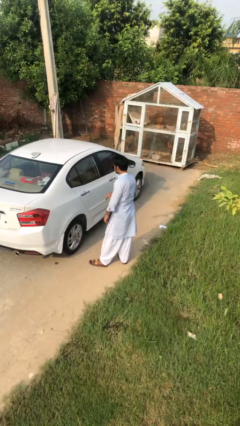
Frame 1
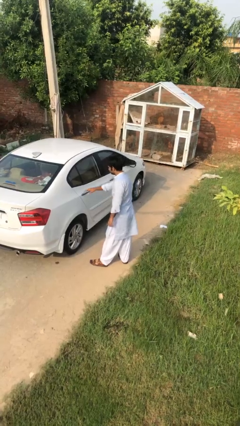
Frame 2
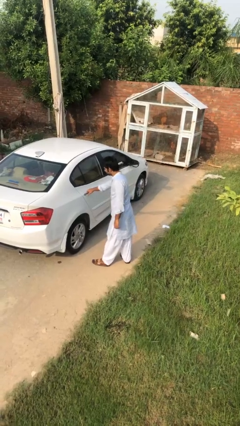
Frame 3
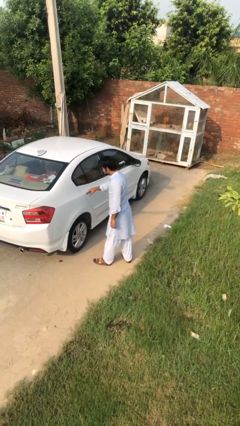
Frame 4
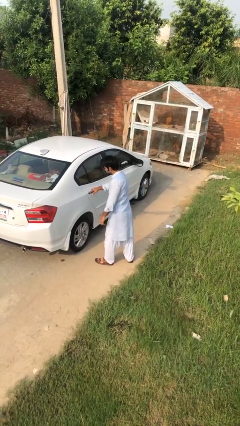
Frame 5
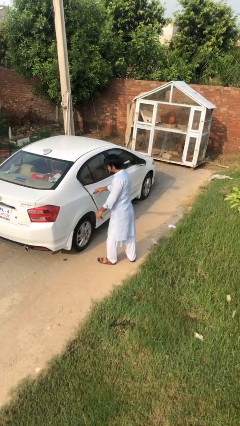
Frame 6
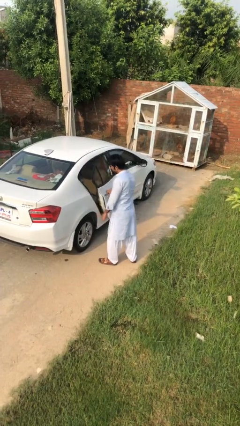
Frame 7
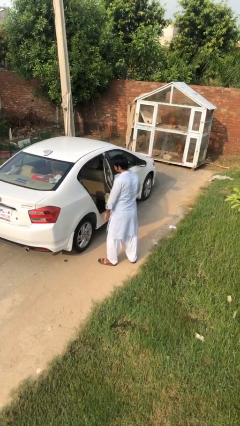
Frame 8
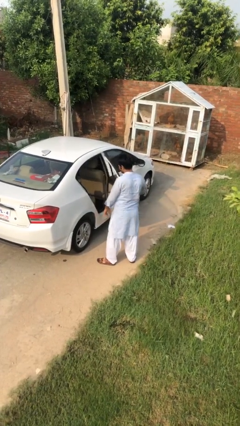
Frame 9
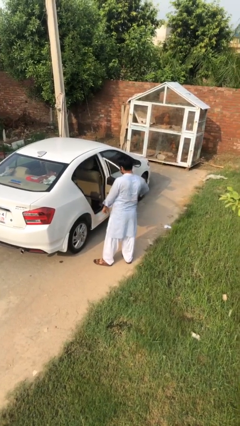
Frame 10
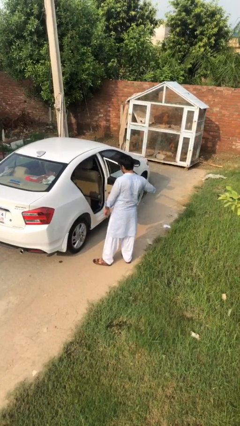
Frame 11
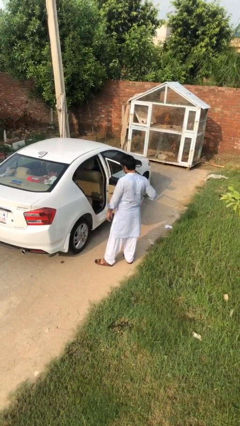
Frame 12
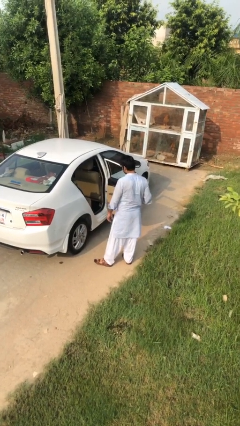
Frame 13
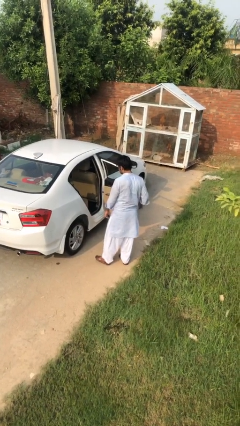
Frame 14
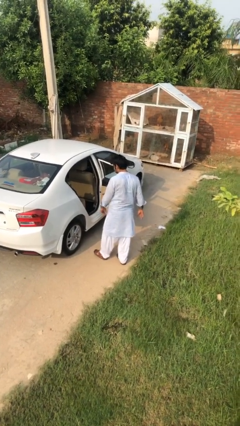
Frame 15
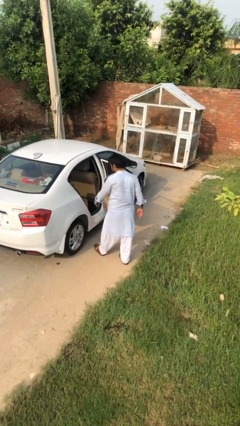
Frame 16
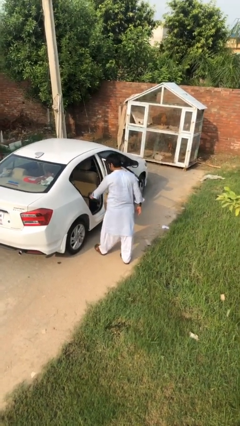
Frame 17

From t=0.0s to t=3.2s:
person opens car door

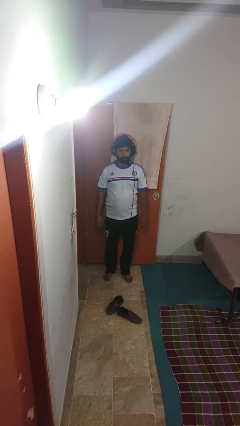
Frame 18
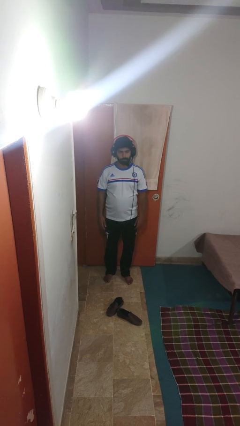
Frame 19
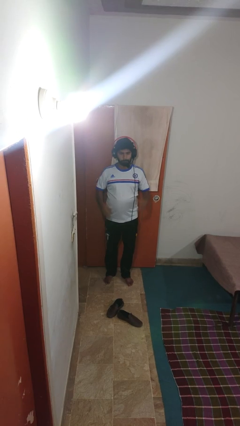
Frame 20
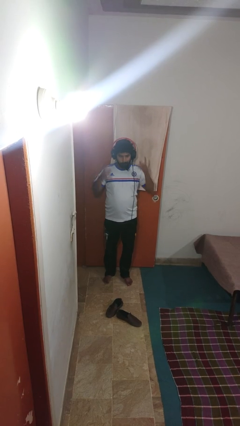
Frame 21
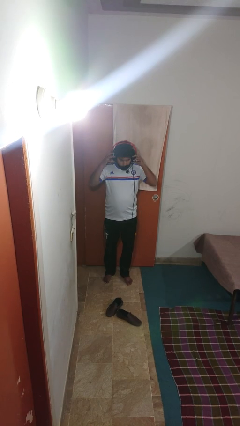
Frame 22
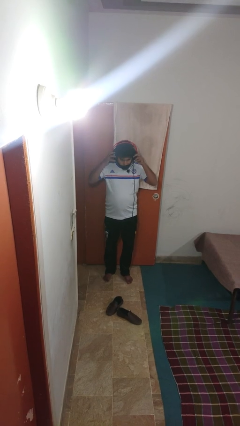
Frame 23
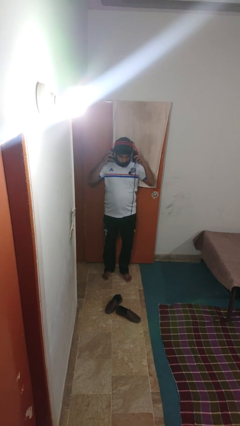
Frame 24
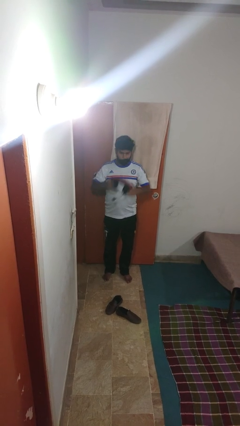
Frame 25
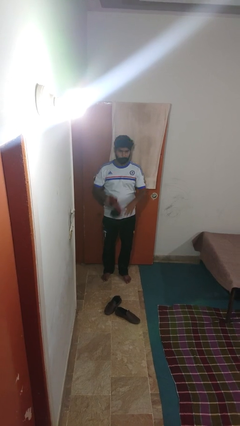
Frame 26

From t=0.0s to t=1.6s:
person takes off headphones

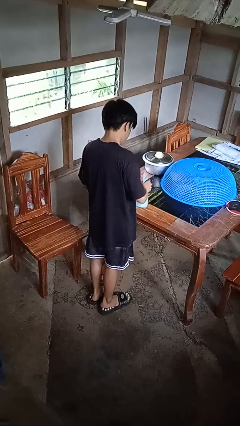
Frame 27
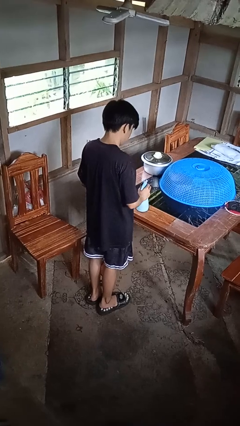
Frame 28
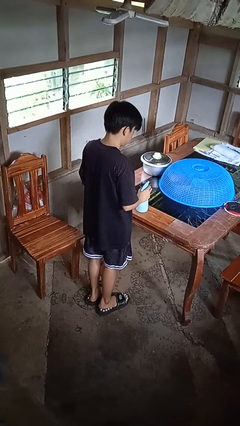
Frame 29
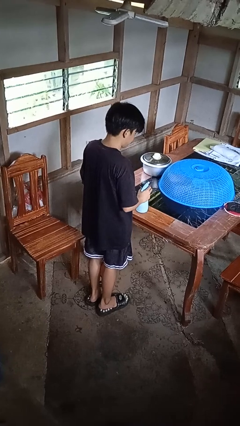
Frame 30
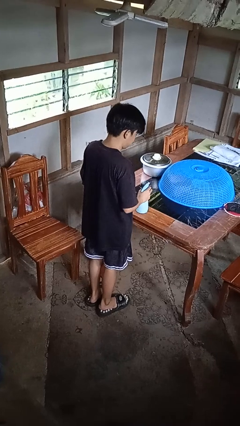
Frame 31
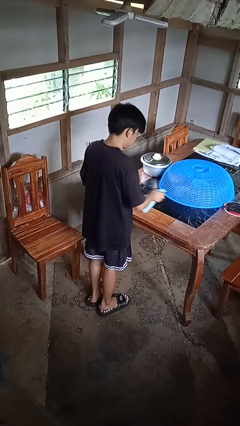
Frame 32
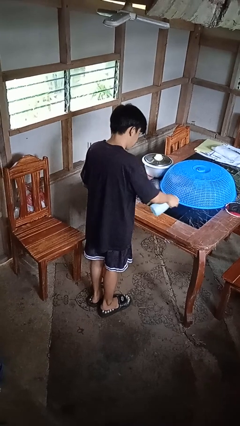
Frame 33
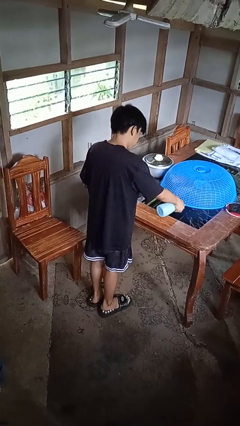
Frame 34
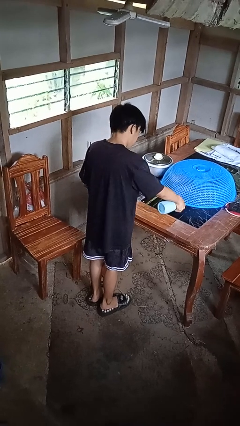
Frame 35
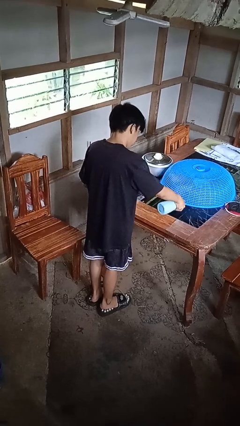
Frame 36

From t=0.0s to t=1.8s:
person sprays from bottle

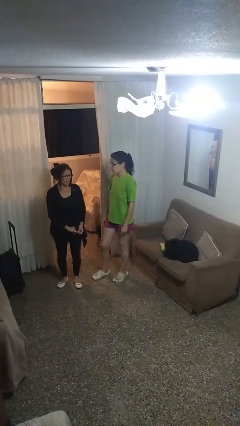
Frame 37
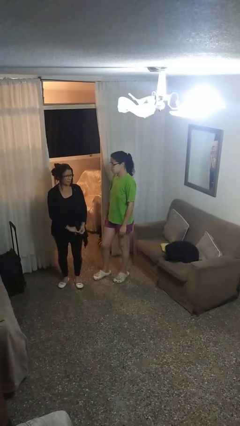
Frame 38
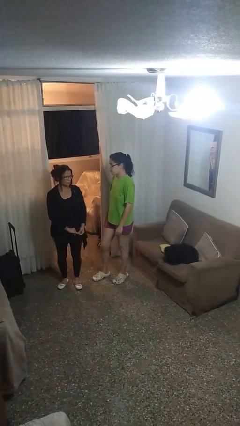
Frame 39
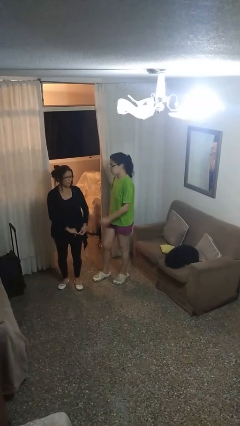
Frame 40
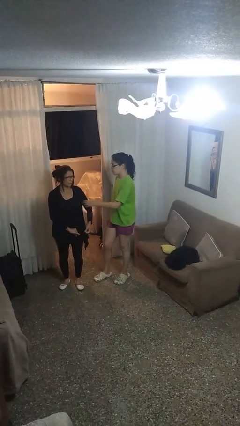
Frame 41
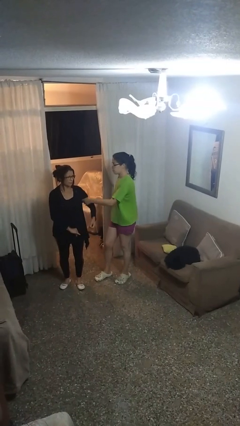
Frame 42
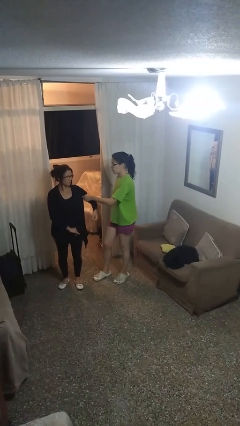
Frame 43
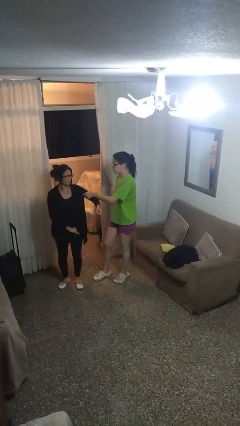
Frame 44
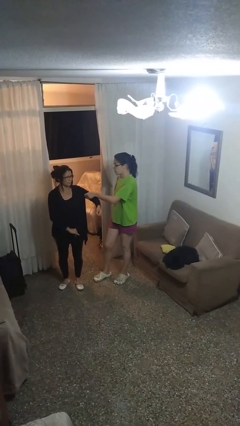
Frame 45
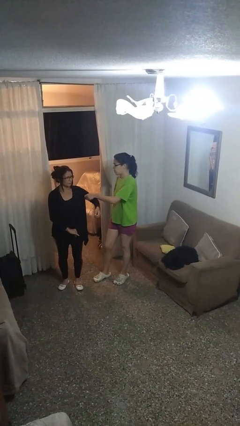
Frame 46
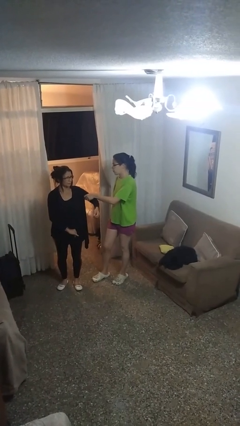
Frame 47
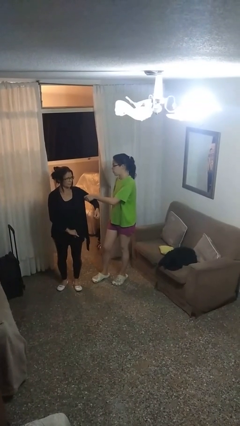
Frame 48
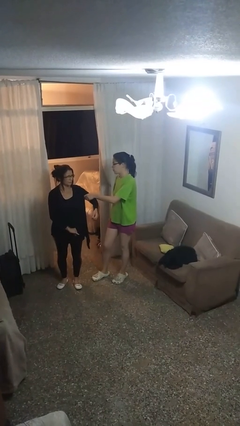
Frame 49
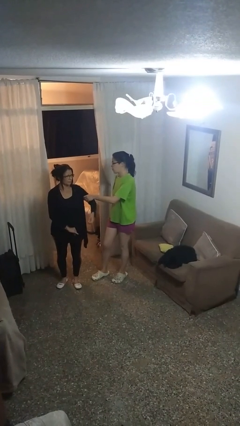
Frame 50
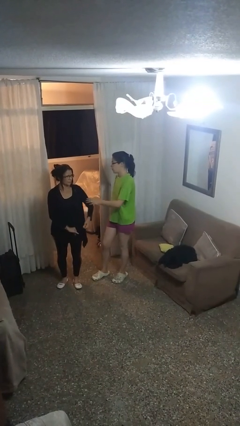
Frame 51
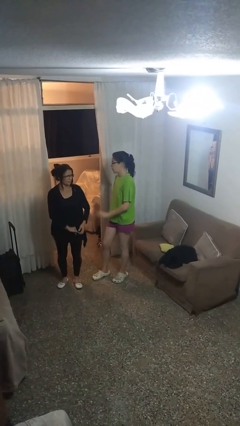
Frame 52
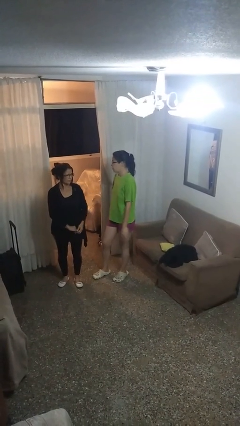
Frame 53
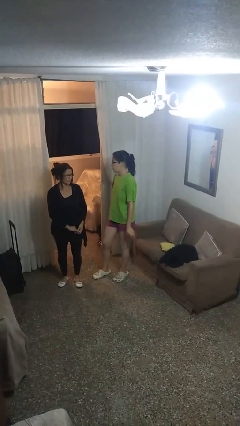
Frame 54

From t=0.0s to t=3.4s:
person grabs person by bicep

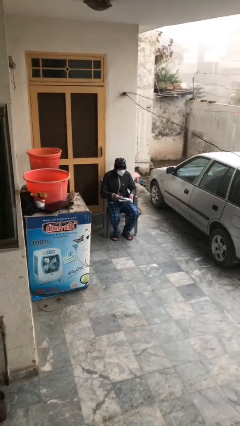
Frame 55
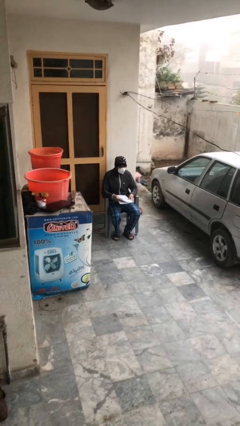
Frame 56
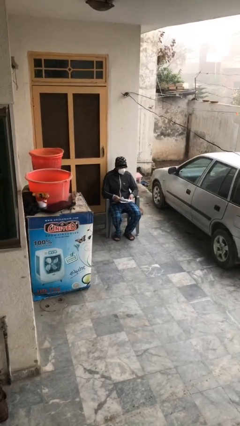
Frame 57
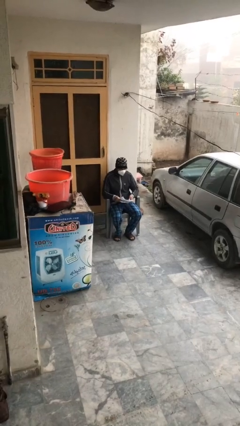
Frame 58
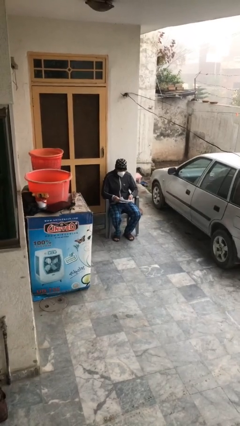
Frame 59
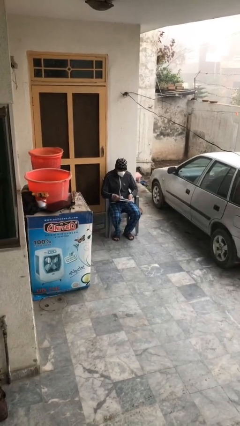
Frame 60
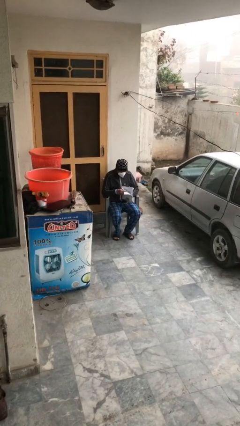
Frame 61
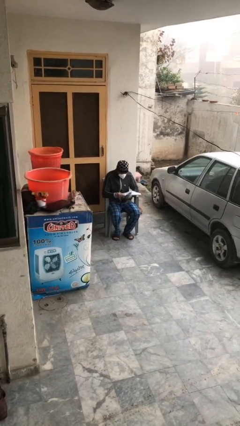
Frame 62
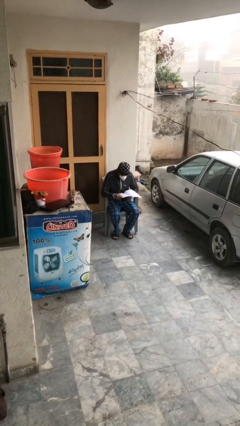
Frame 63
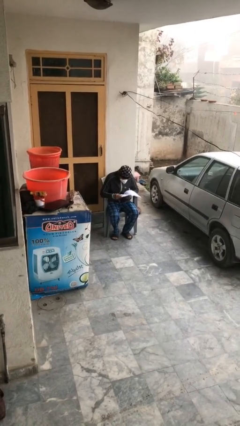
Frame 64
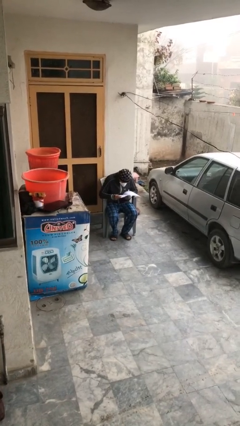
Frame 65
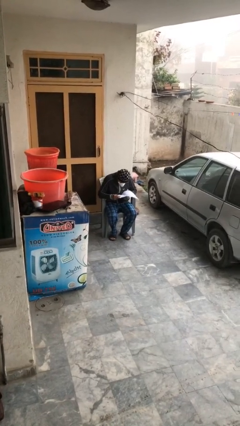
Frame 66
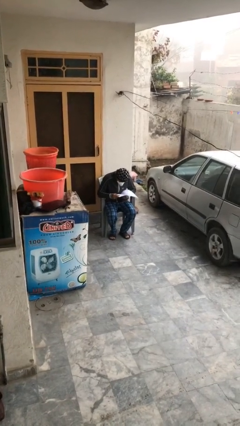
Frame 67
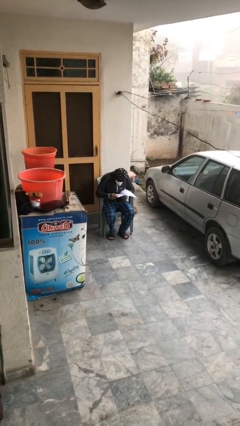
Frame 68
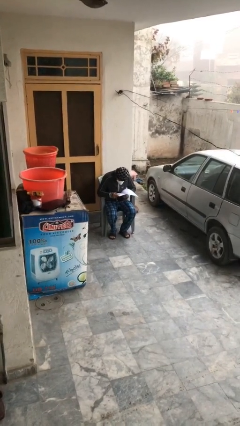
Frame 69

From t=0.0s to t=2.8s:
person reads document

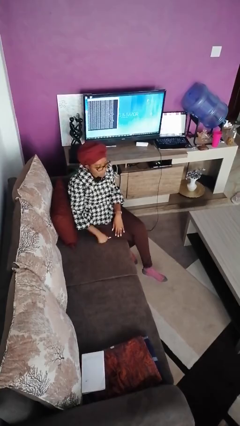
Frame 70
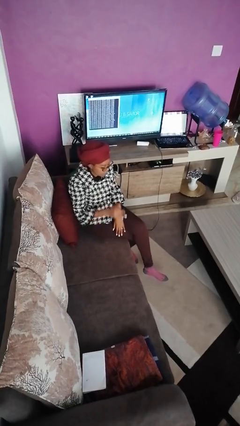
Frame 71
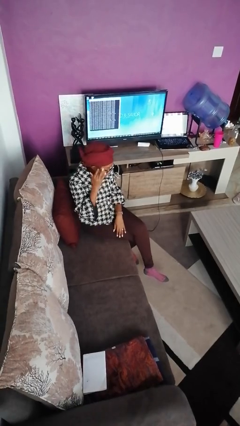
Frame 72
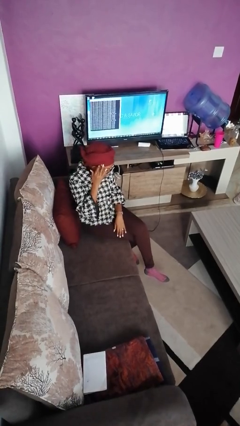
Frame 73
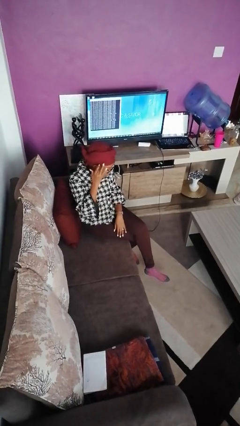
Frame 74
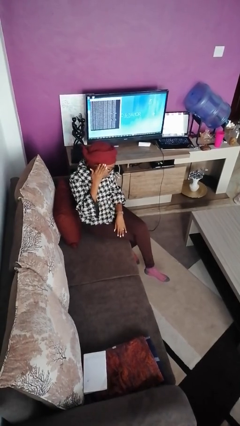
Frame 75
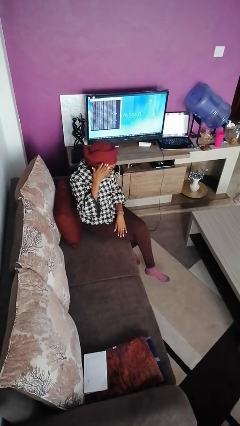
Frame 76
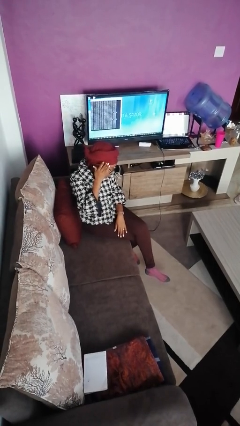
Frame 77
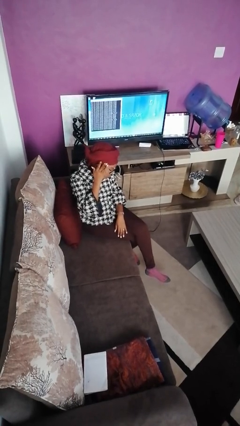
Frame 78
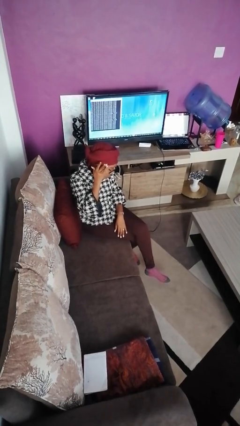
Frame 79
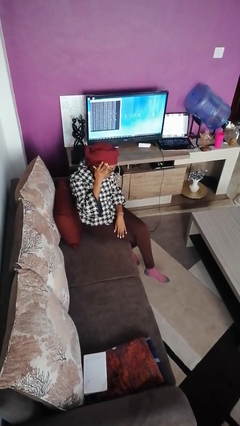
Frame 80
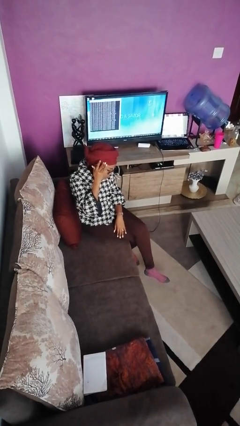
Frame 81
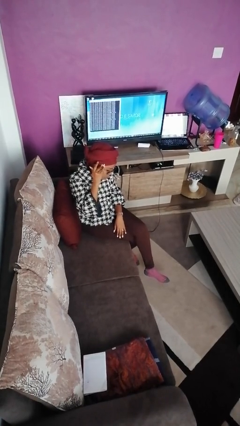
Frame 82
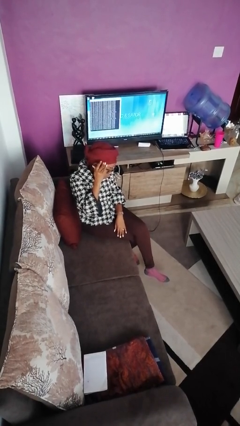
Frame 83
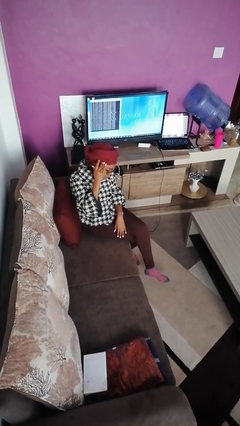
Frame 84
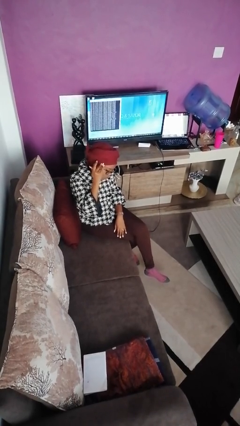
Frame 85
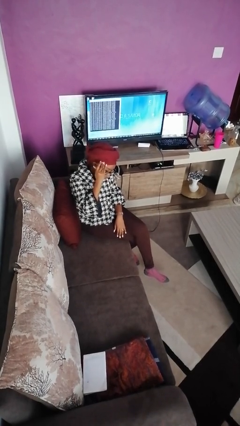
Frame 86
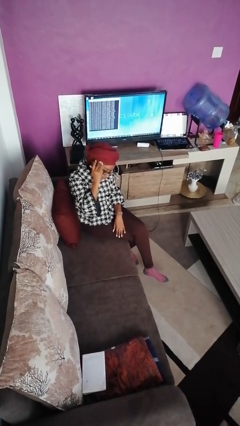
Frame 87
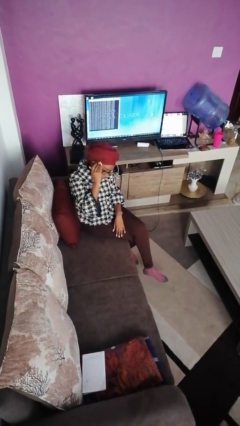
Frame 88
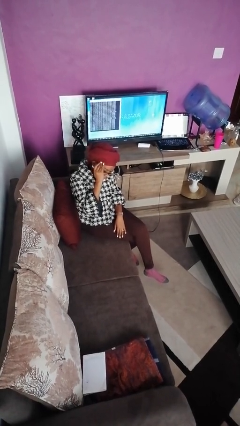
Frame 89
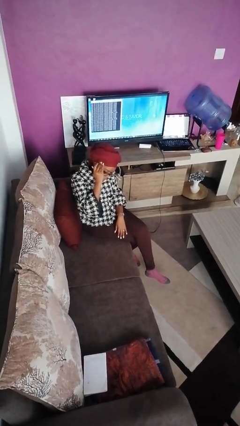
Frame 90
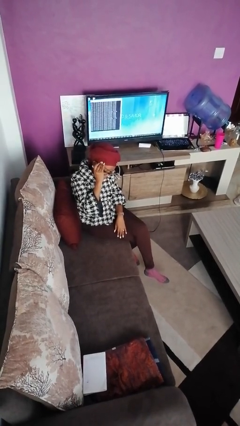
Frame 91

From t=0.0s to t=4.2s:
person scratches face

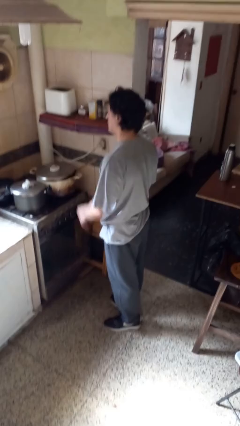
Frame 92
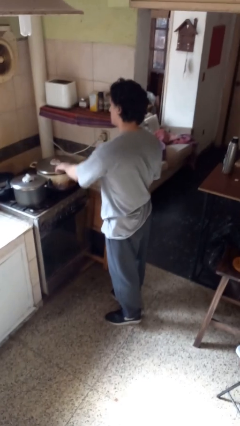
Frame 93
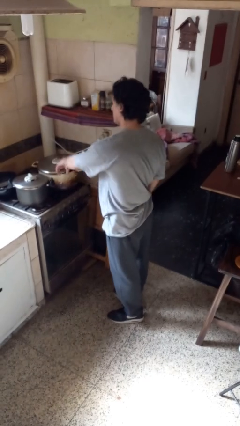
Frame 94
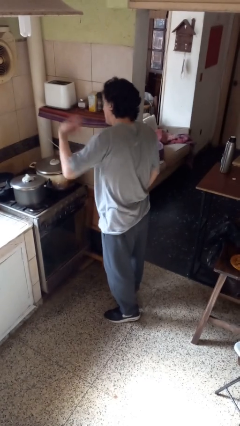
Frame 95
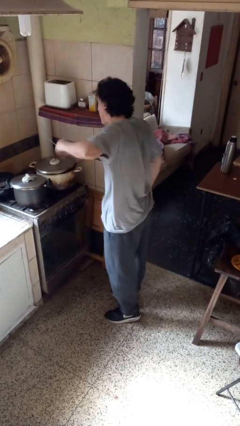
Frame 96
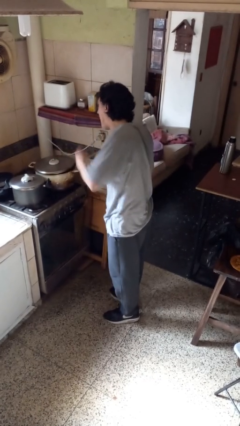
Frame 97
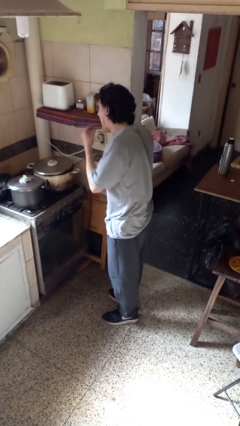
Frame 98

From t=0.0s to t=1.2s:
person burns hand
